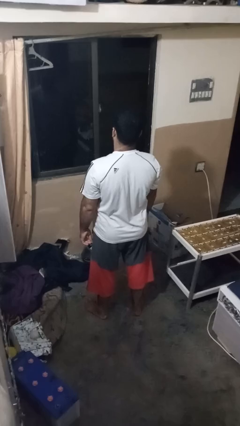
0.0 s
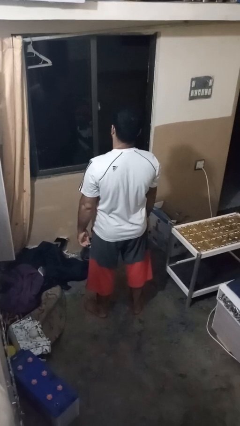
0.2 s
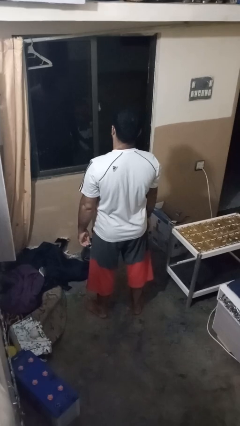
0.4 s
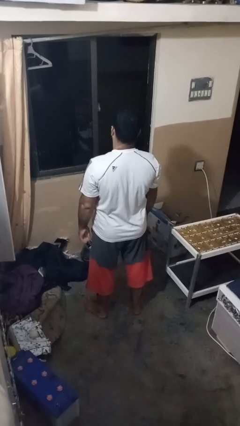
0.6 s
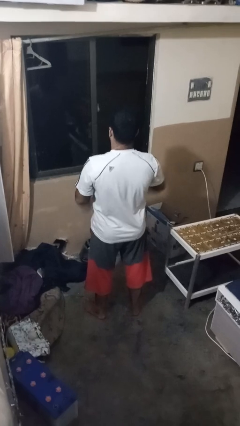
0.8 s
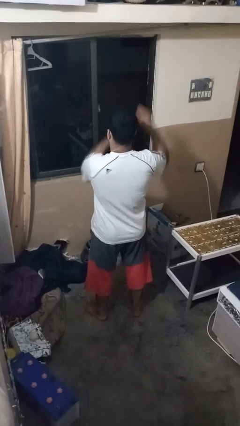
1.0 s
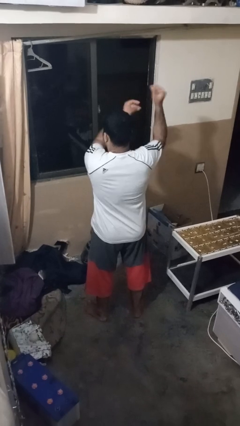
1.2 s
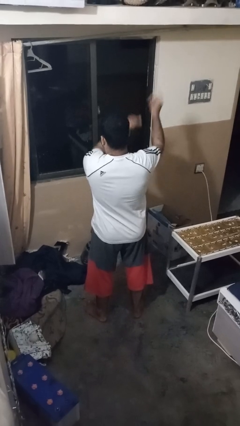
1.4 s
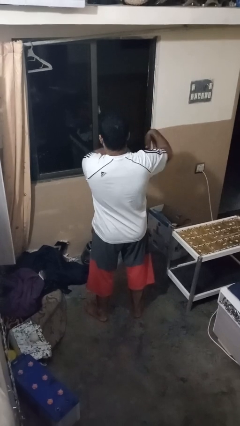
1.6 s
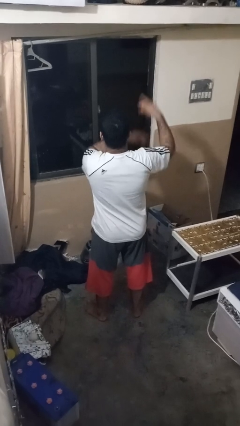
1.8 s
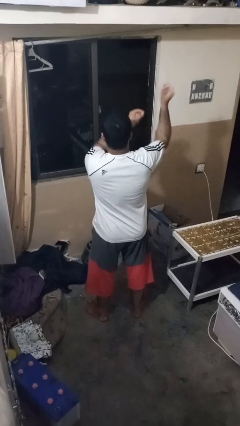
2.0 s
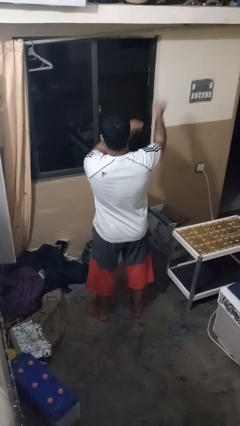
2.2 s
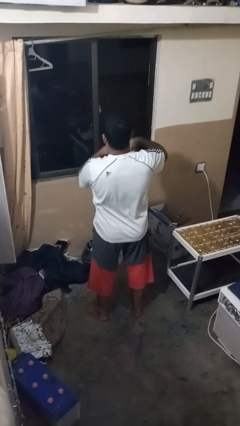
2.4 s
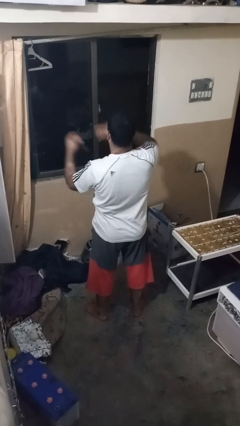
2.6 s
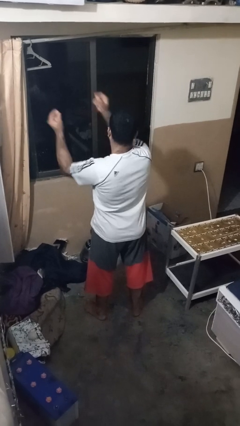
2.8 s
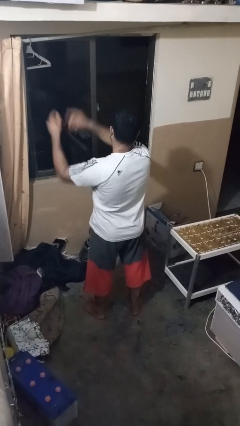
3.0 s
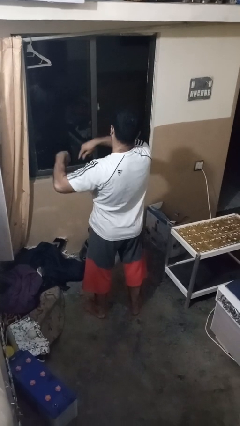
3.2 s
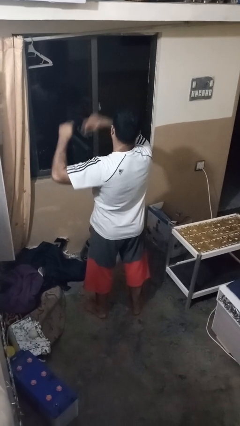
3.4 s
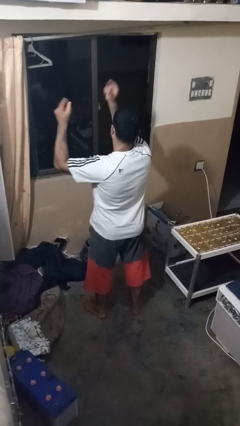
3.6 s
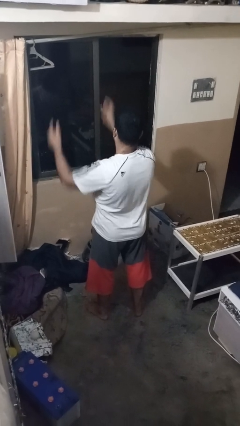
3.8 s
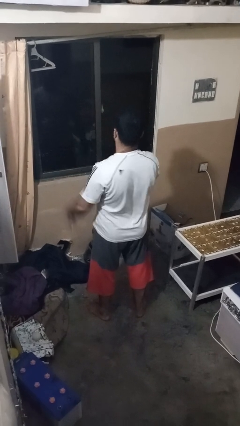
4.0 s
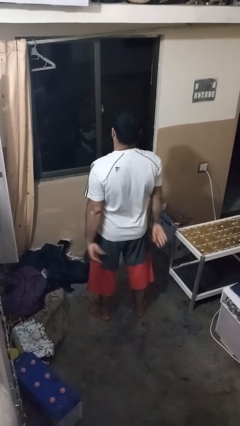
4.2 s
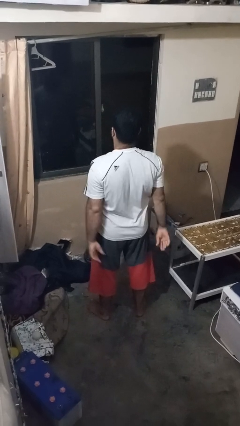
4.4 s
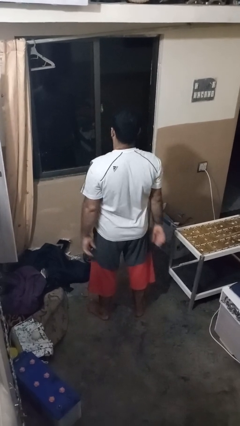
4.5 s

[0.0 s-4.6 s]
person snaps fingers

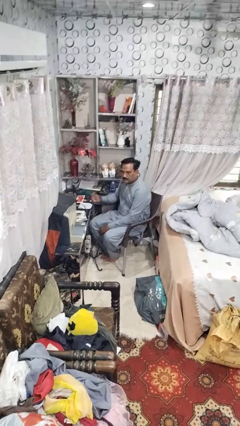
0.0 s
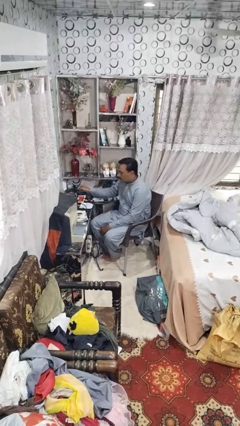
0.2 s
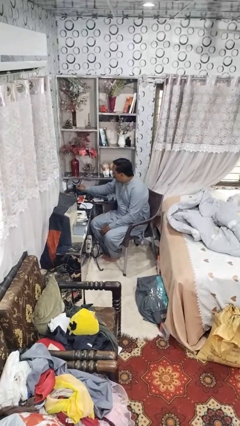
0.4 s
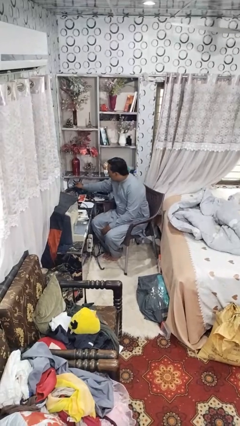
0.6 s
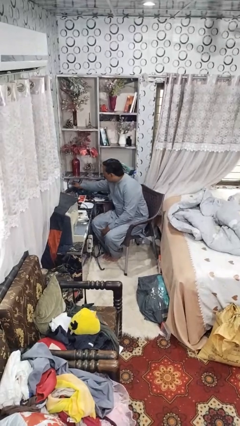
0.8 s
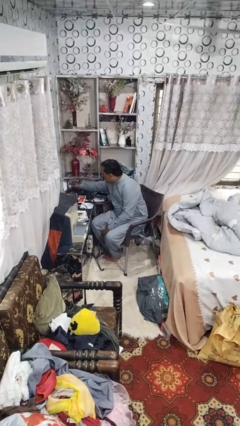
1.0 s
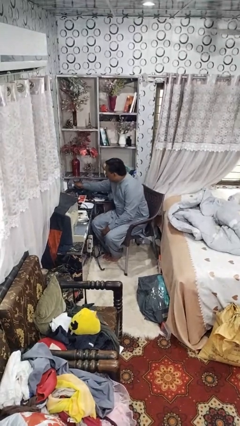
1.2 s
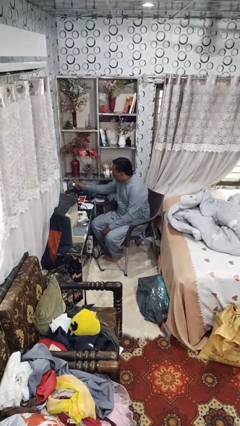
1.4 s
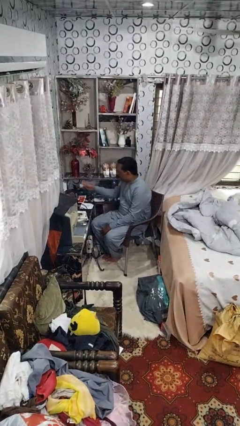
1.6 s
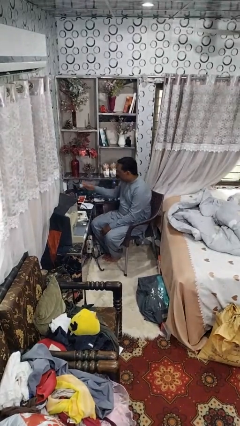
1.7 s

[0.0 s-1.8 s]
person unplugs from electrical socket

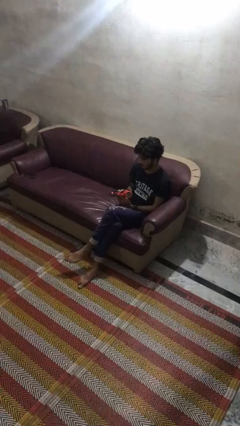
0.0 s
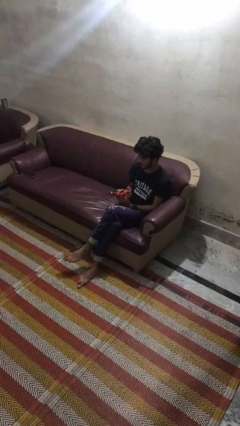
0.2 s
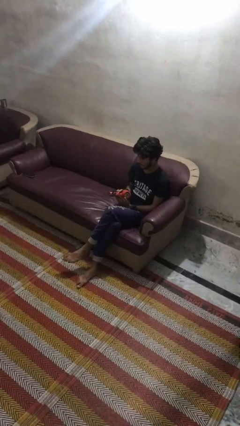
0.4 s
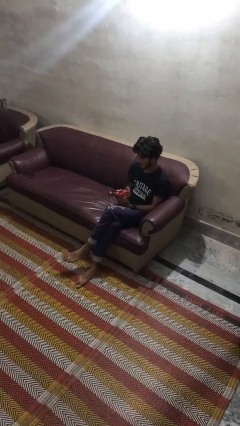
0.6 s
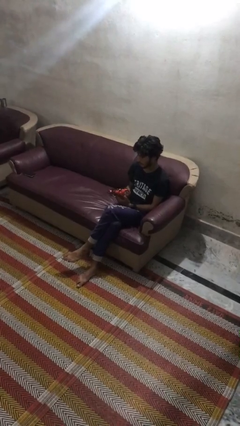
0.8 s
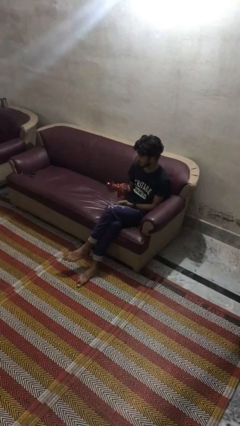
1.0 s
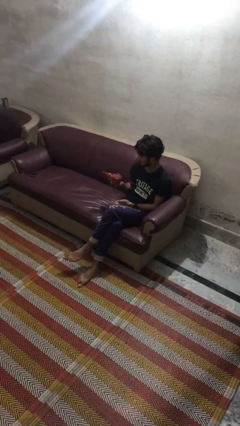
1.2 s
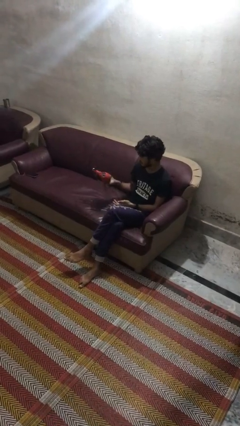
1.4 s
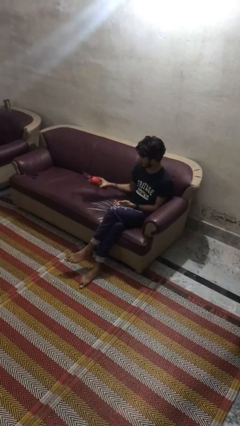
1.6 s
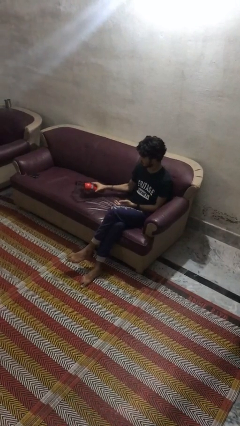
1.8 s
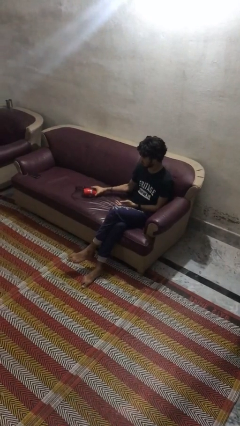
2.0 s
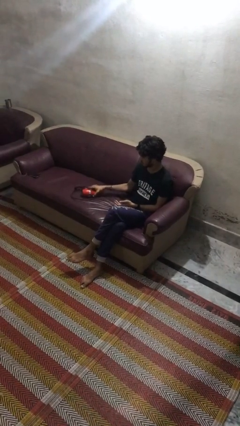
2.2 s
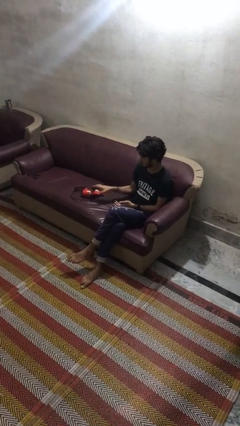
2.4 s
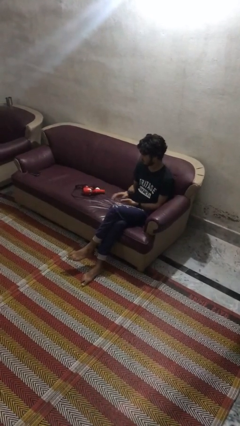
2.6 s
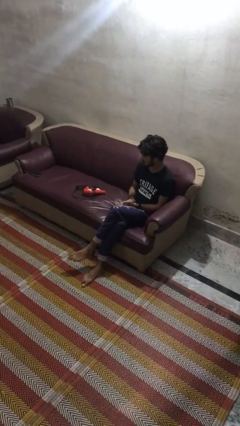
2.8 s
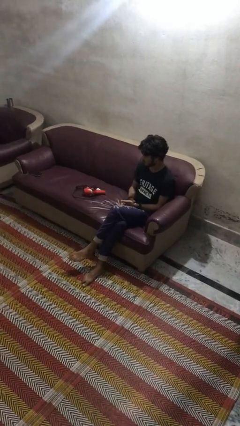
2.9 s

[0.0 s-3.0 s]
person puts down object on couch

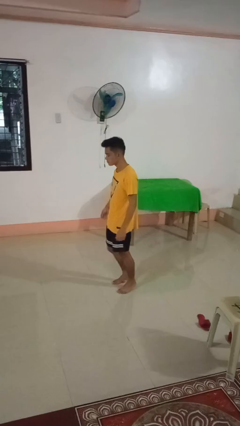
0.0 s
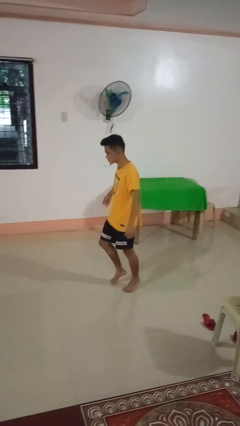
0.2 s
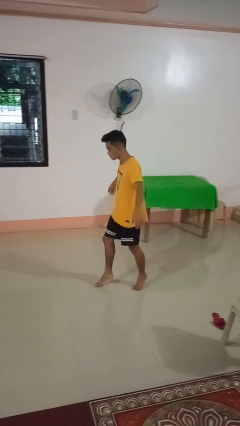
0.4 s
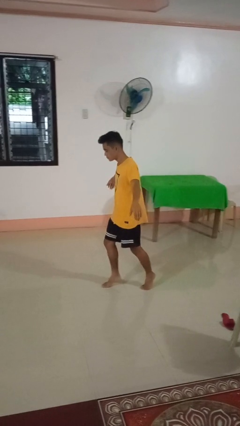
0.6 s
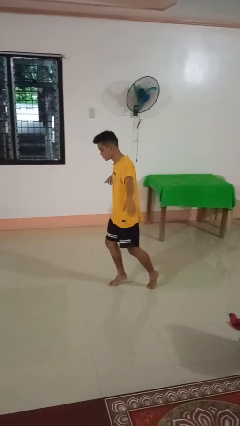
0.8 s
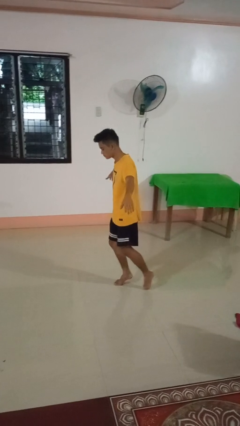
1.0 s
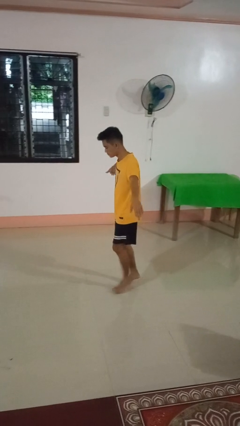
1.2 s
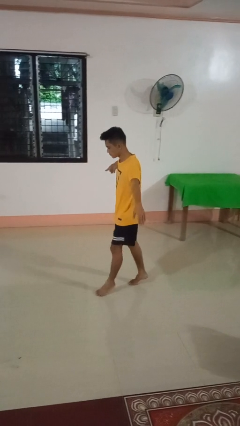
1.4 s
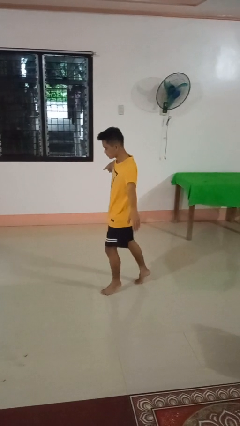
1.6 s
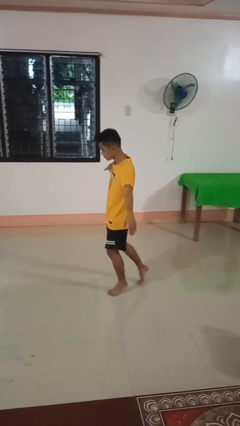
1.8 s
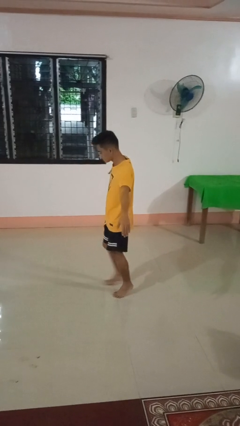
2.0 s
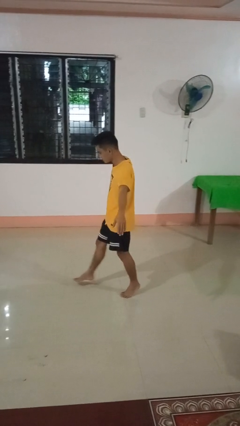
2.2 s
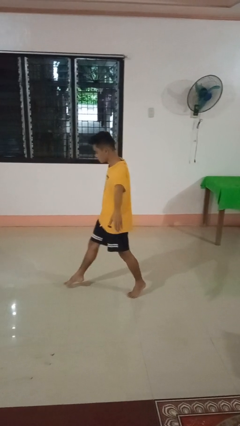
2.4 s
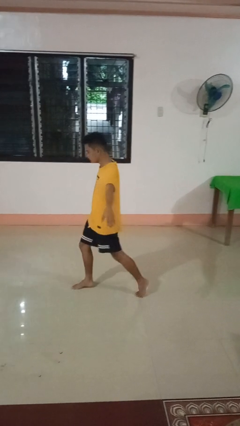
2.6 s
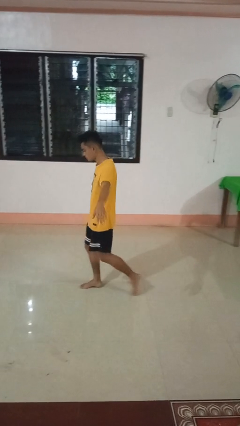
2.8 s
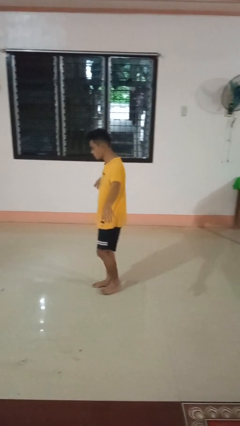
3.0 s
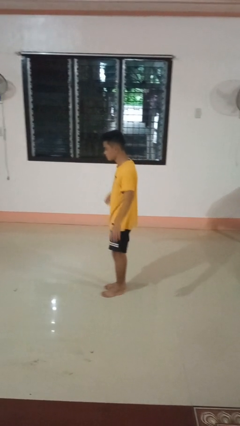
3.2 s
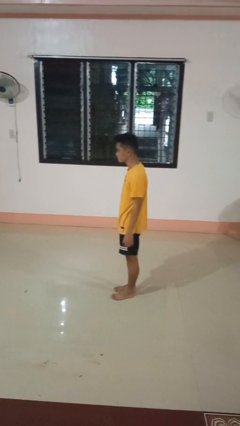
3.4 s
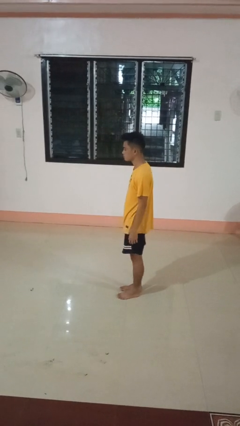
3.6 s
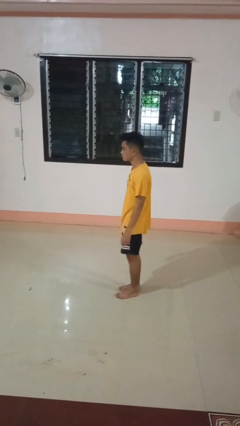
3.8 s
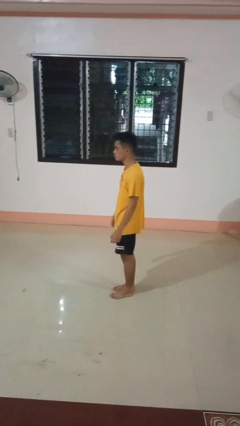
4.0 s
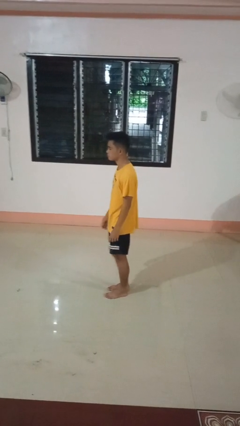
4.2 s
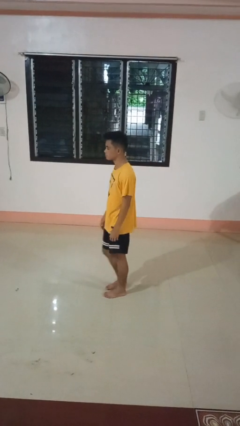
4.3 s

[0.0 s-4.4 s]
person walks tiptoe

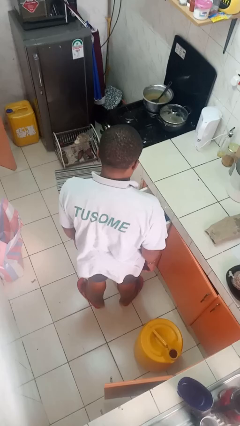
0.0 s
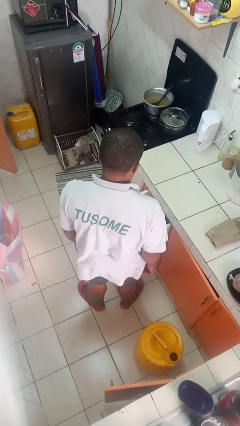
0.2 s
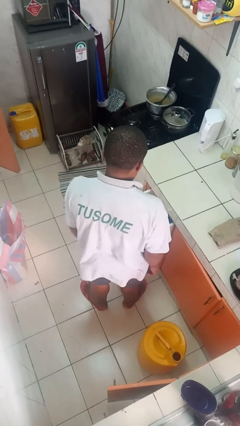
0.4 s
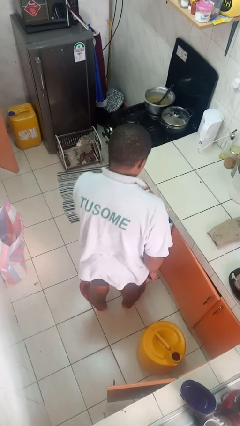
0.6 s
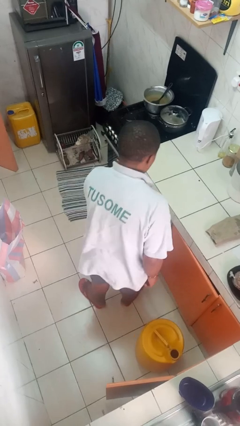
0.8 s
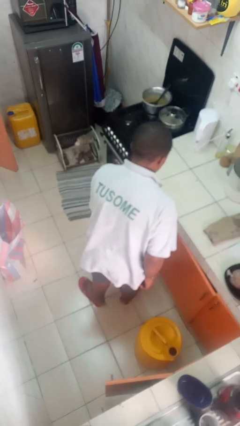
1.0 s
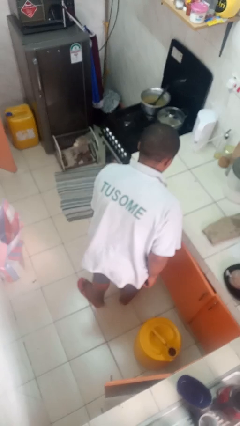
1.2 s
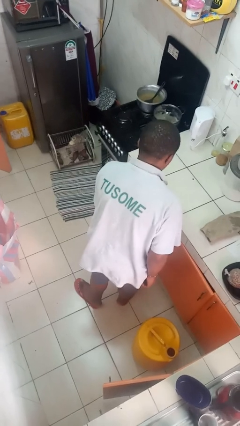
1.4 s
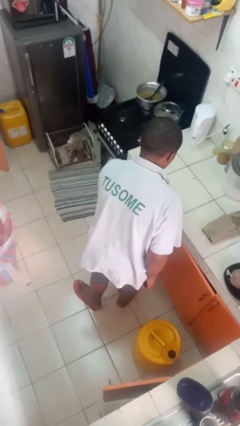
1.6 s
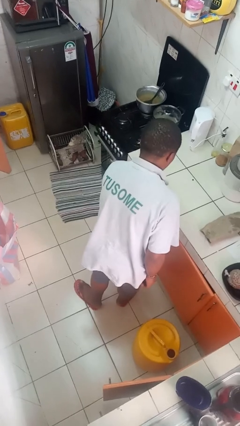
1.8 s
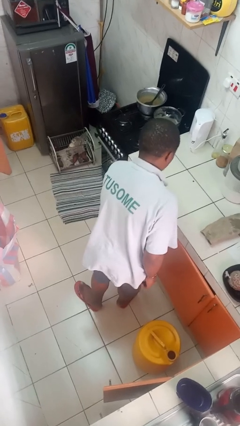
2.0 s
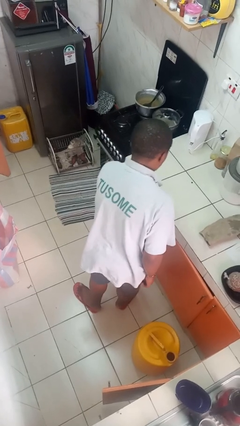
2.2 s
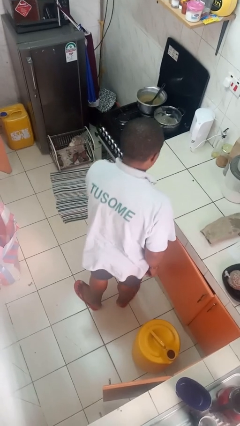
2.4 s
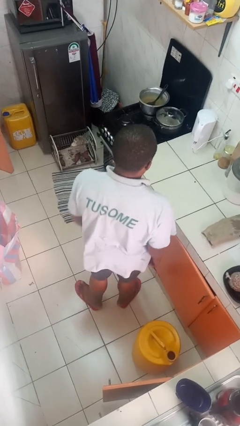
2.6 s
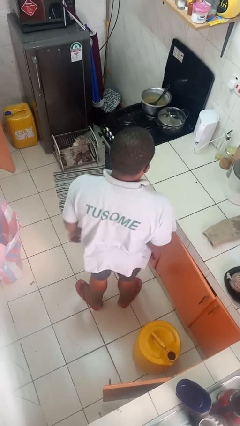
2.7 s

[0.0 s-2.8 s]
person closes kitchen drawer

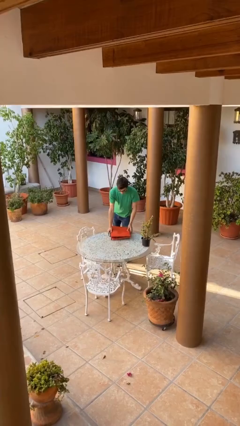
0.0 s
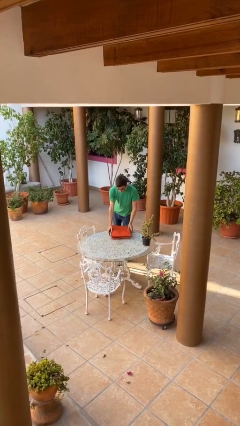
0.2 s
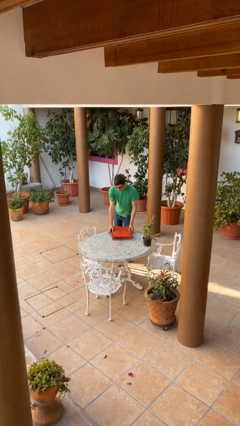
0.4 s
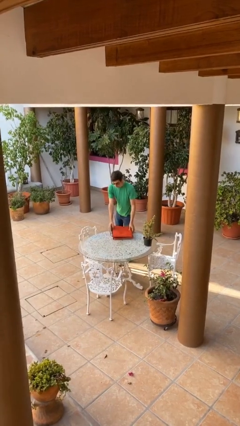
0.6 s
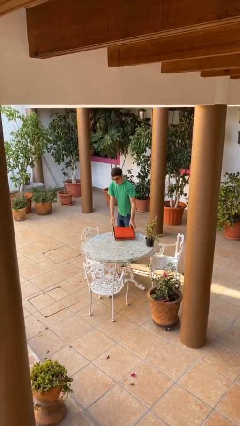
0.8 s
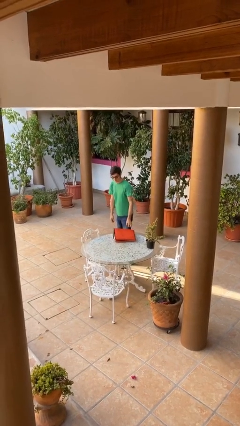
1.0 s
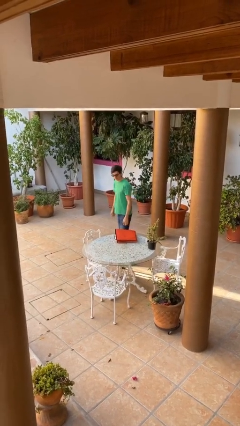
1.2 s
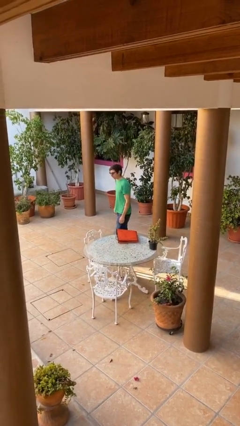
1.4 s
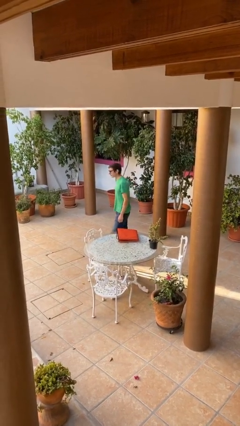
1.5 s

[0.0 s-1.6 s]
person puts down object on table
